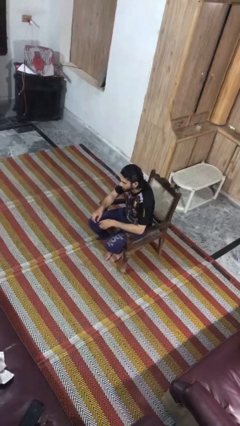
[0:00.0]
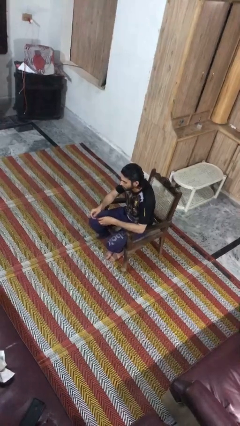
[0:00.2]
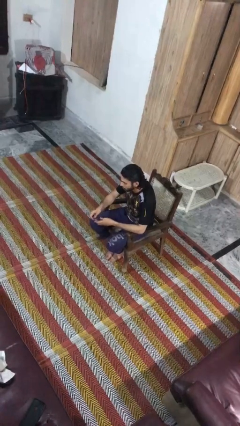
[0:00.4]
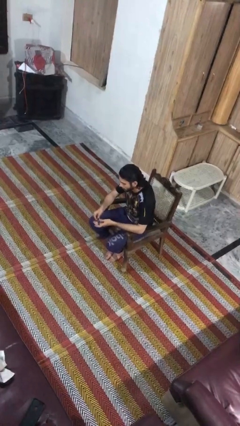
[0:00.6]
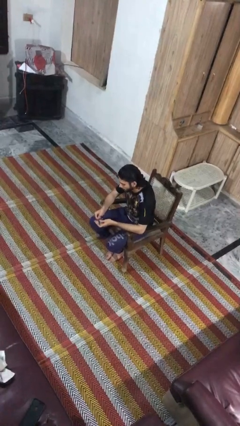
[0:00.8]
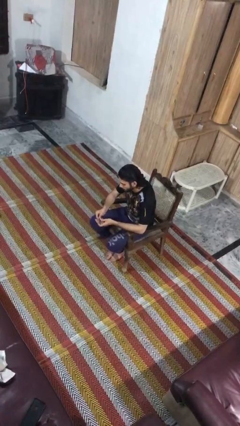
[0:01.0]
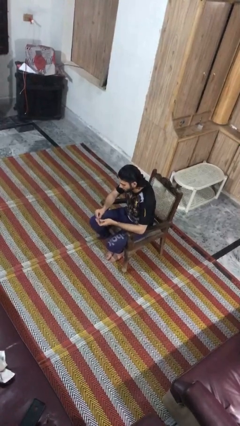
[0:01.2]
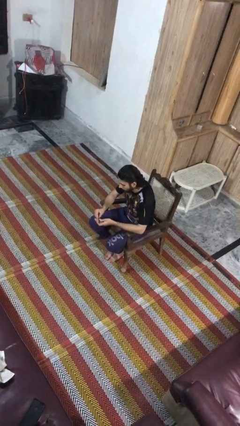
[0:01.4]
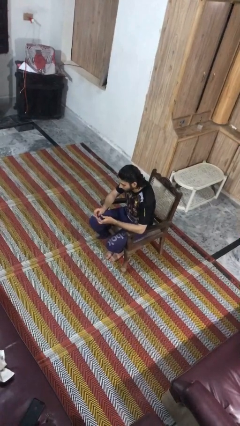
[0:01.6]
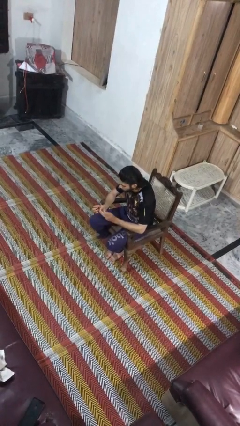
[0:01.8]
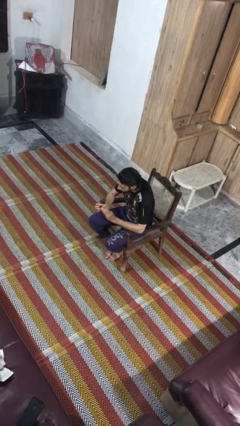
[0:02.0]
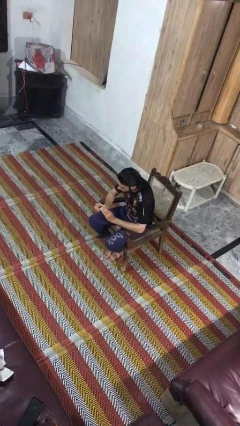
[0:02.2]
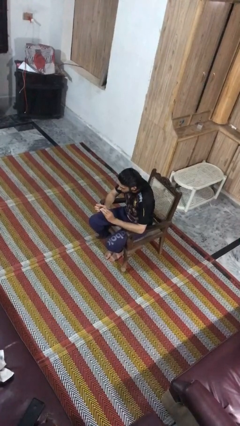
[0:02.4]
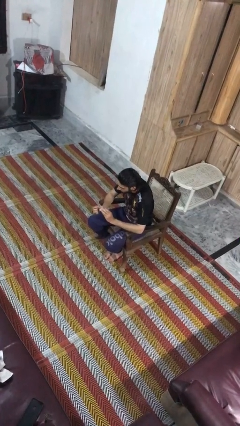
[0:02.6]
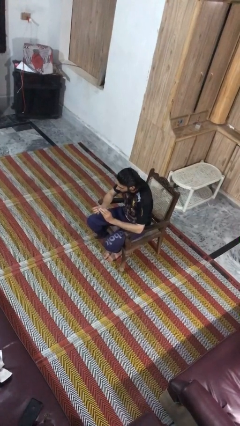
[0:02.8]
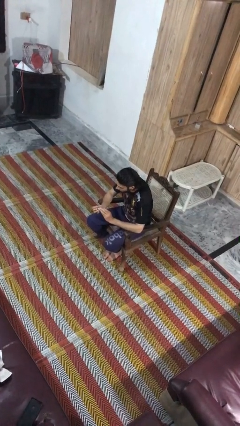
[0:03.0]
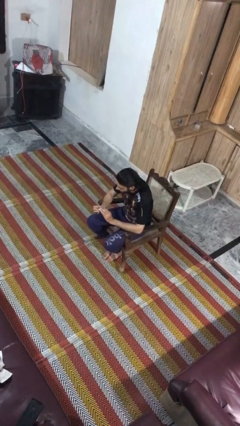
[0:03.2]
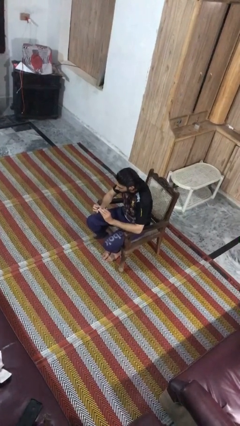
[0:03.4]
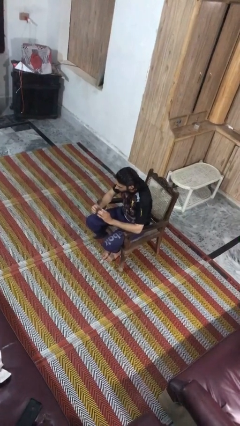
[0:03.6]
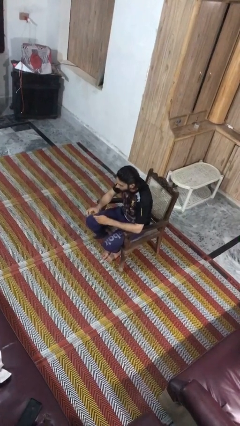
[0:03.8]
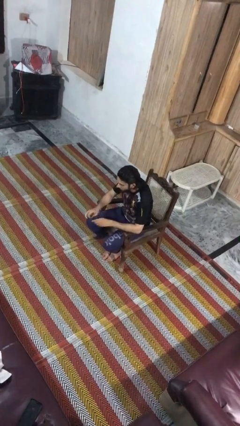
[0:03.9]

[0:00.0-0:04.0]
person clips fingernails

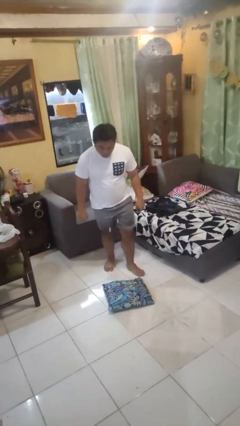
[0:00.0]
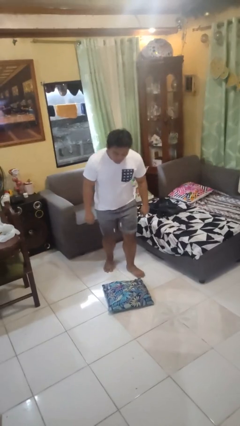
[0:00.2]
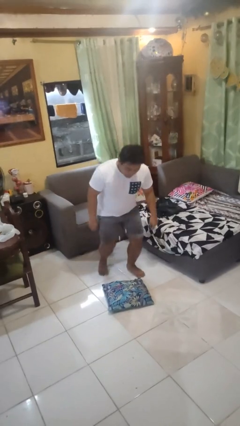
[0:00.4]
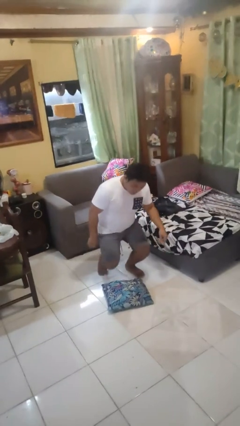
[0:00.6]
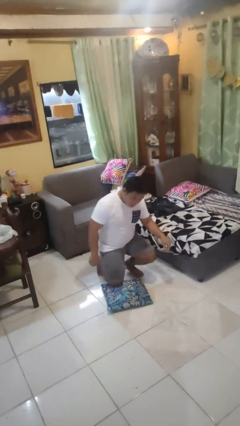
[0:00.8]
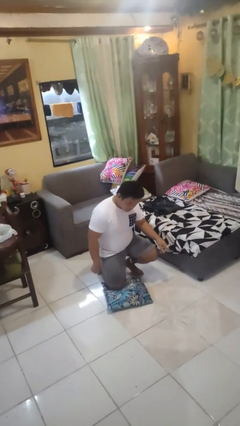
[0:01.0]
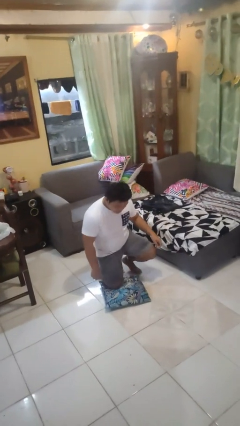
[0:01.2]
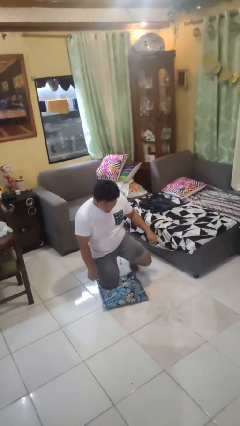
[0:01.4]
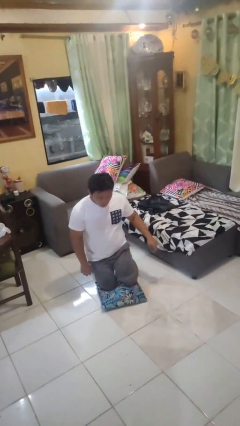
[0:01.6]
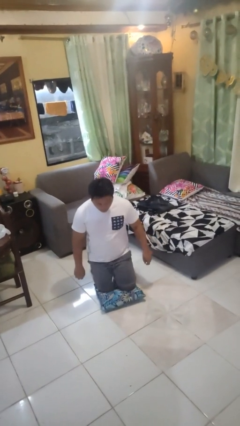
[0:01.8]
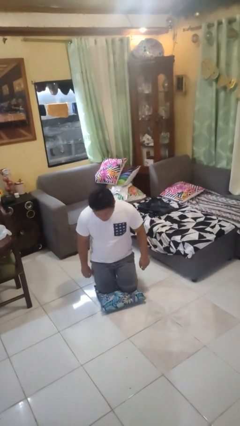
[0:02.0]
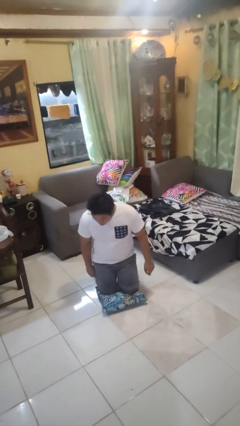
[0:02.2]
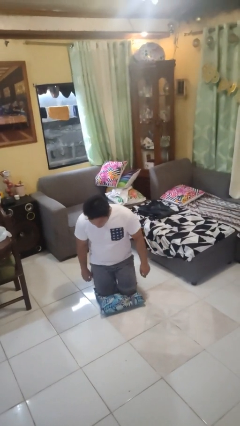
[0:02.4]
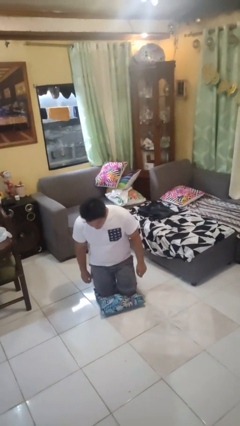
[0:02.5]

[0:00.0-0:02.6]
person kneels

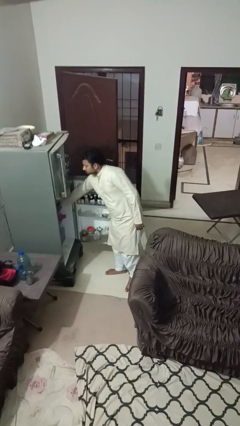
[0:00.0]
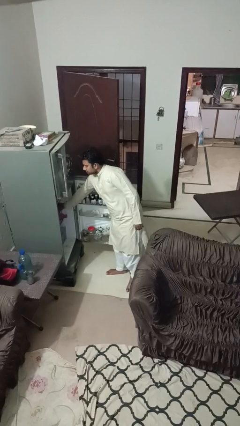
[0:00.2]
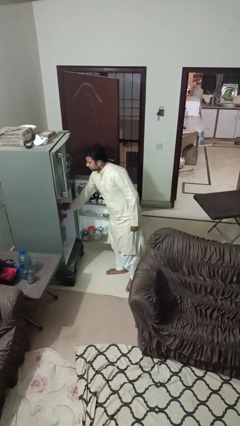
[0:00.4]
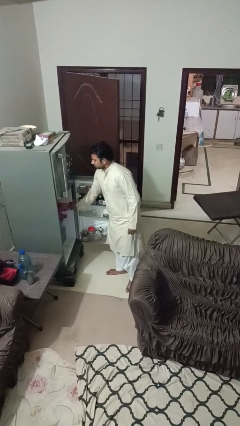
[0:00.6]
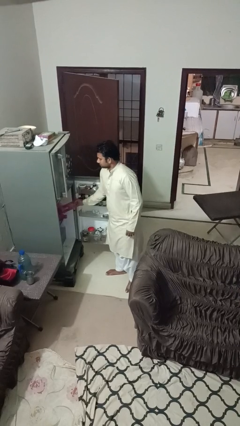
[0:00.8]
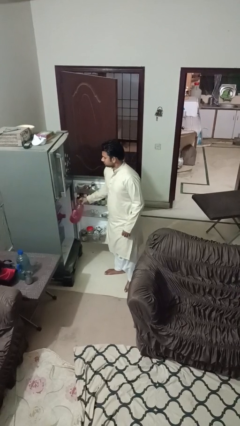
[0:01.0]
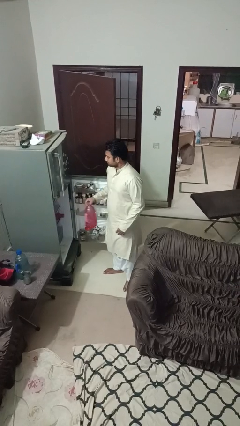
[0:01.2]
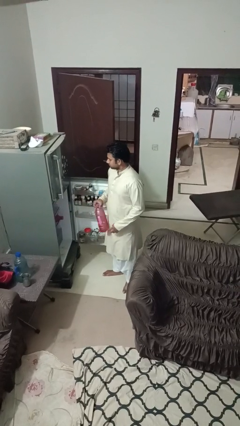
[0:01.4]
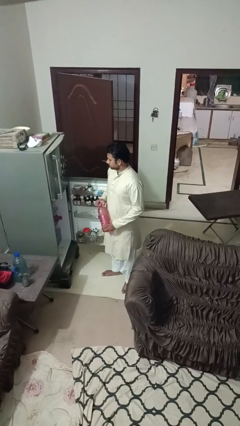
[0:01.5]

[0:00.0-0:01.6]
person takes object from refrigerator

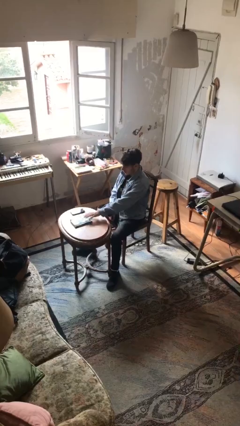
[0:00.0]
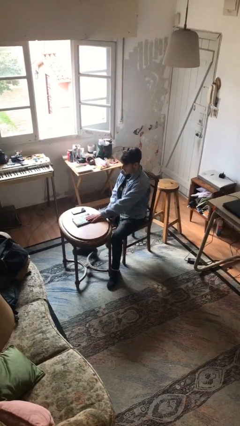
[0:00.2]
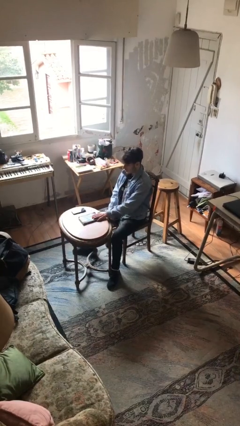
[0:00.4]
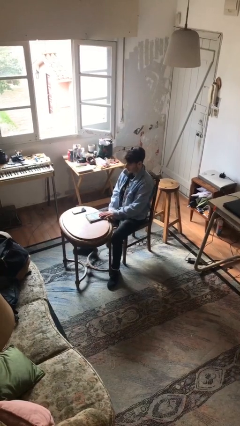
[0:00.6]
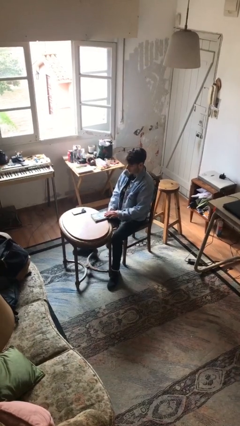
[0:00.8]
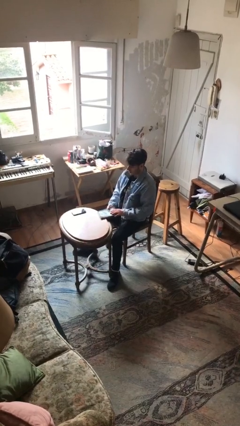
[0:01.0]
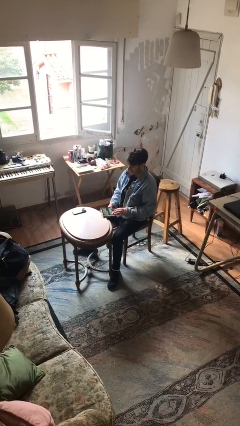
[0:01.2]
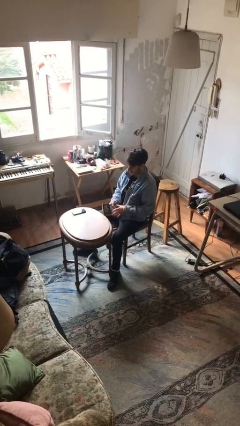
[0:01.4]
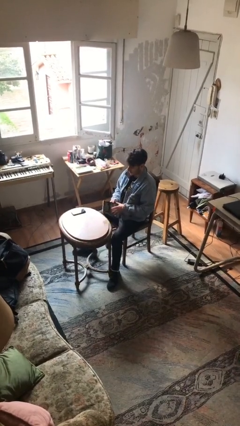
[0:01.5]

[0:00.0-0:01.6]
person picks up object from table

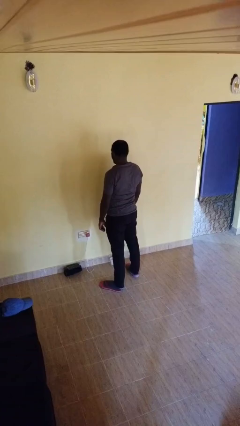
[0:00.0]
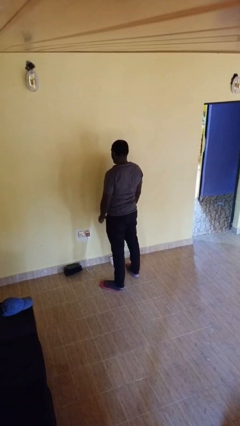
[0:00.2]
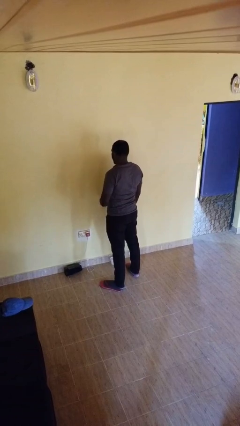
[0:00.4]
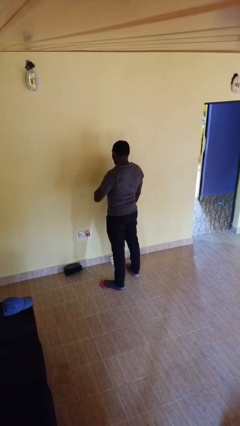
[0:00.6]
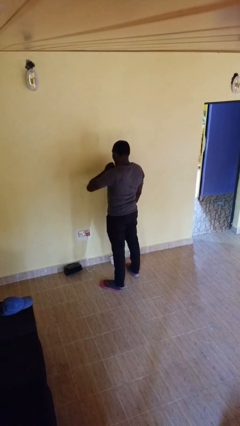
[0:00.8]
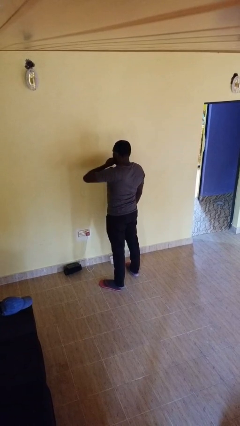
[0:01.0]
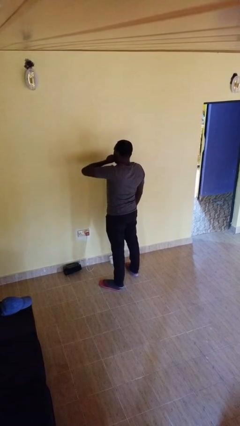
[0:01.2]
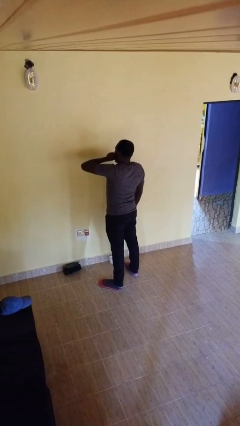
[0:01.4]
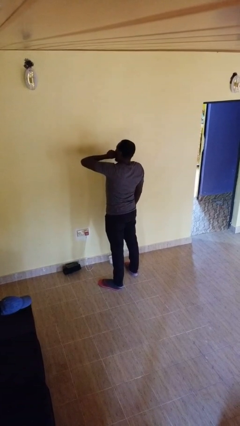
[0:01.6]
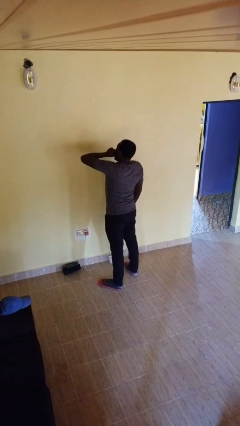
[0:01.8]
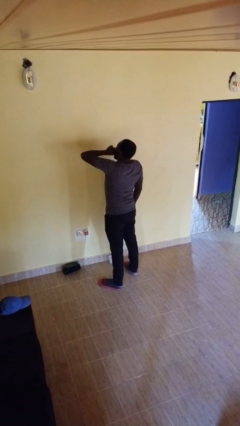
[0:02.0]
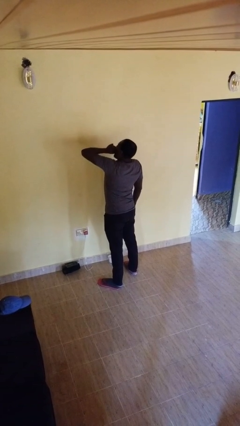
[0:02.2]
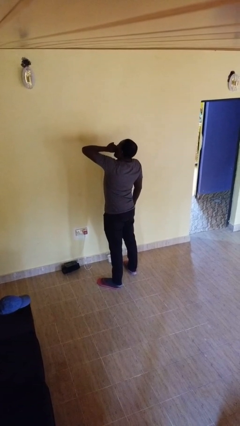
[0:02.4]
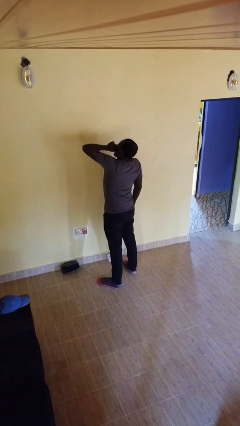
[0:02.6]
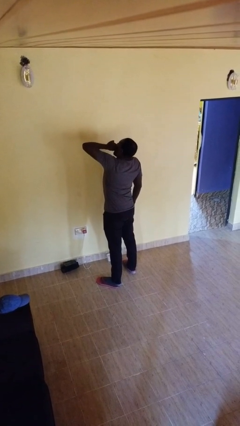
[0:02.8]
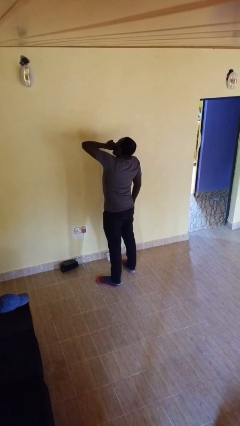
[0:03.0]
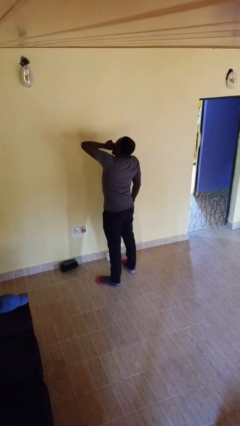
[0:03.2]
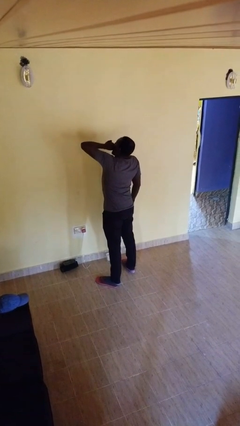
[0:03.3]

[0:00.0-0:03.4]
person yawns

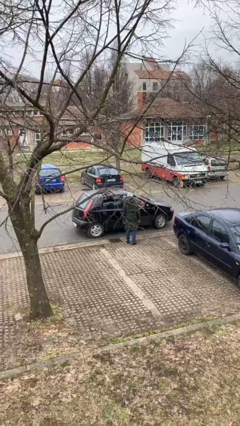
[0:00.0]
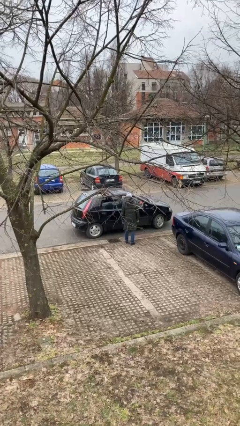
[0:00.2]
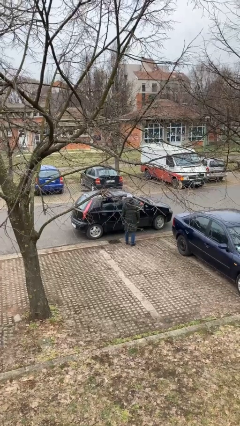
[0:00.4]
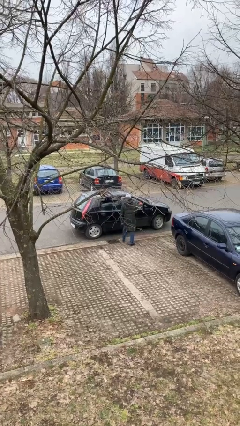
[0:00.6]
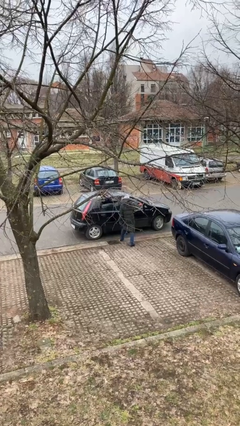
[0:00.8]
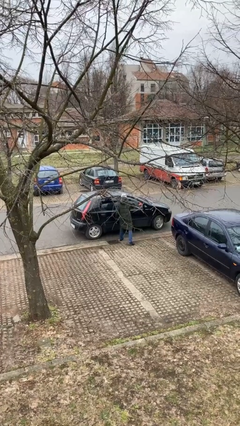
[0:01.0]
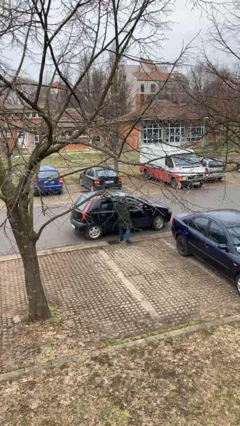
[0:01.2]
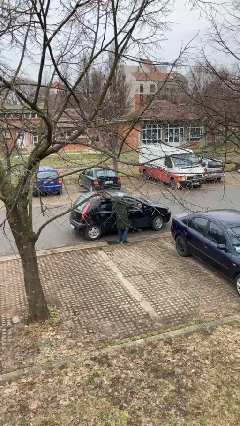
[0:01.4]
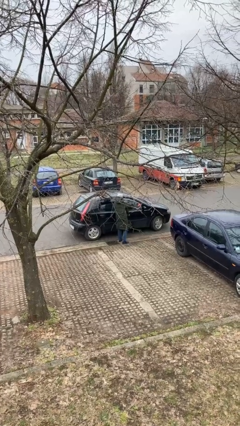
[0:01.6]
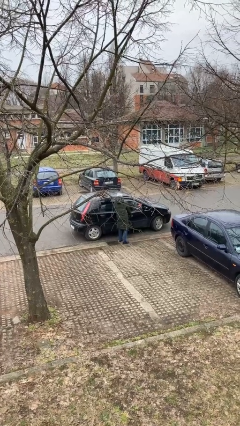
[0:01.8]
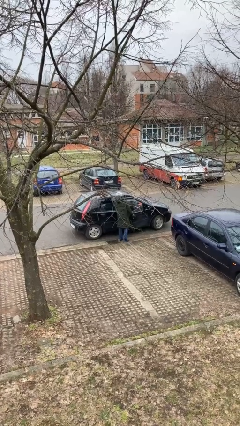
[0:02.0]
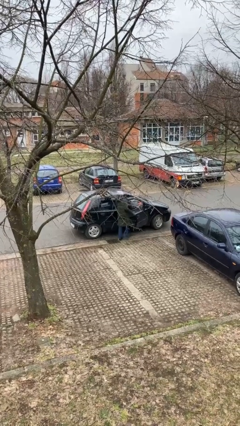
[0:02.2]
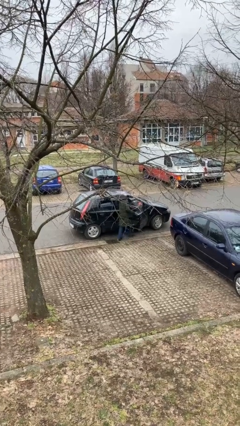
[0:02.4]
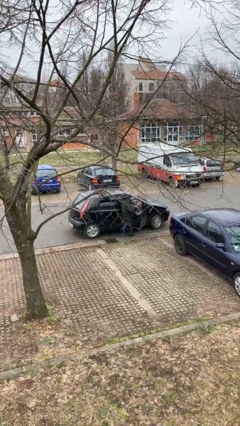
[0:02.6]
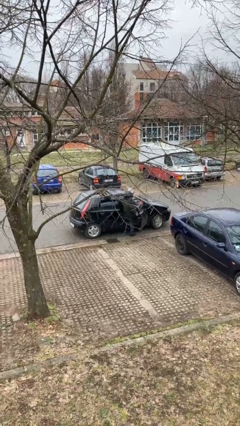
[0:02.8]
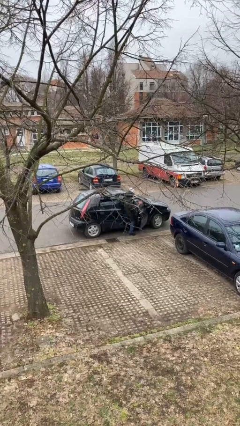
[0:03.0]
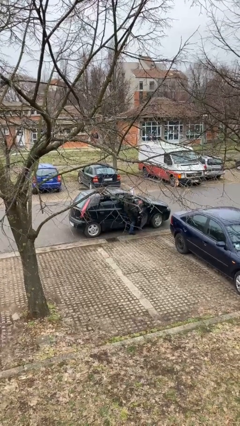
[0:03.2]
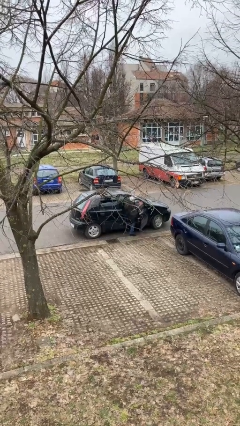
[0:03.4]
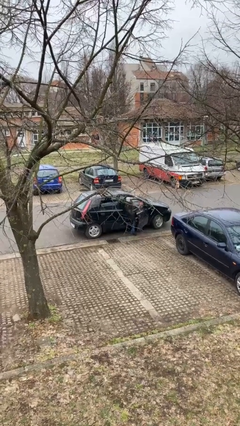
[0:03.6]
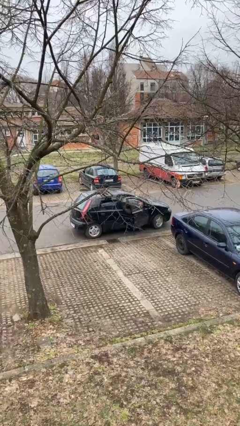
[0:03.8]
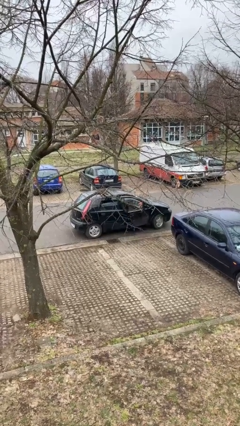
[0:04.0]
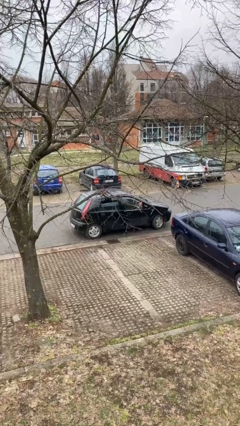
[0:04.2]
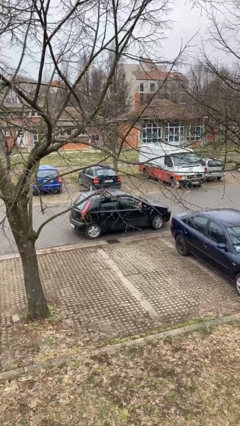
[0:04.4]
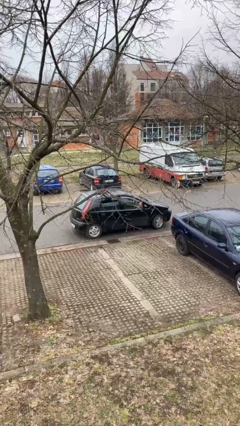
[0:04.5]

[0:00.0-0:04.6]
car picks up person
